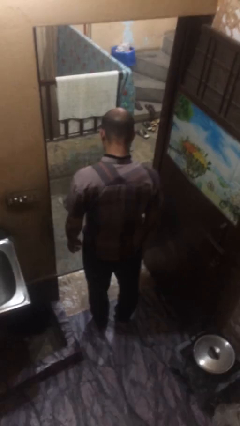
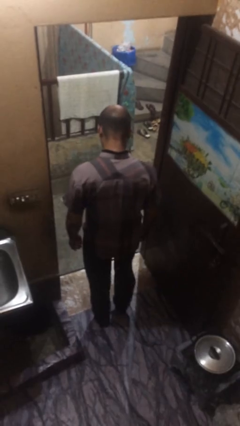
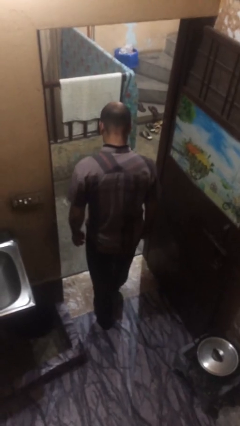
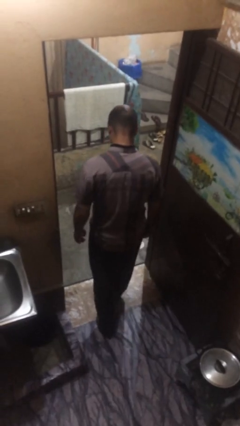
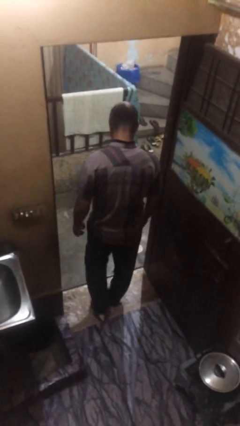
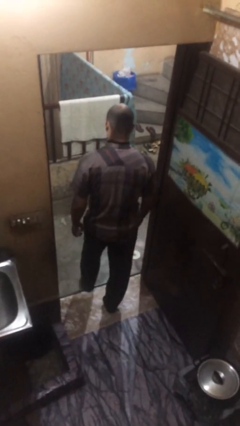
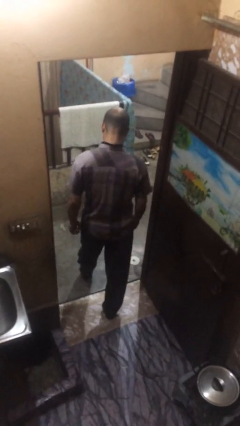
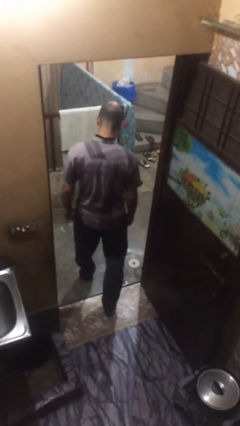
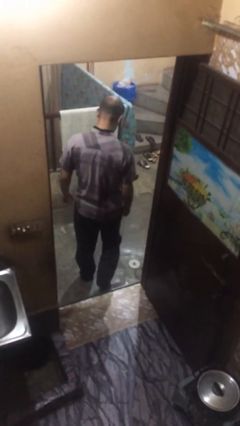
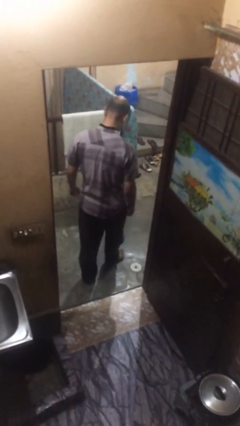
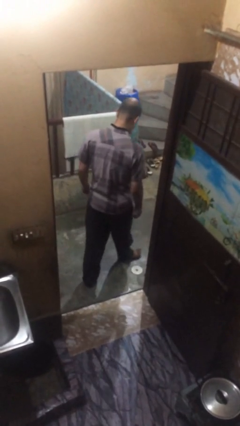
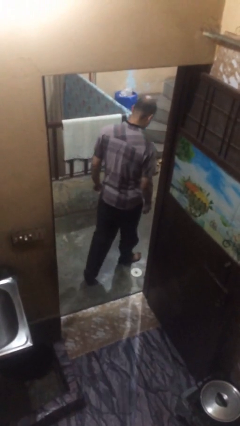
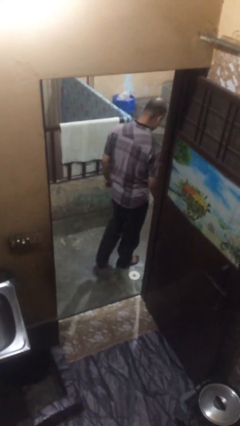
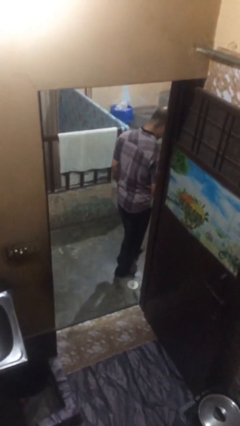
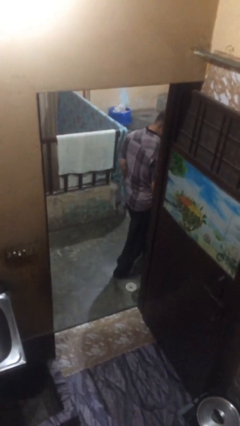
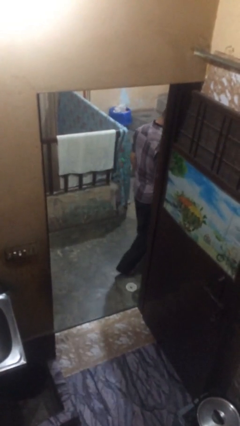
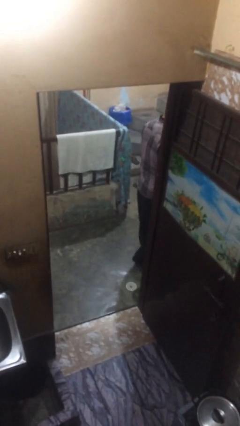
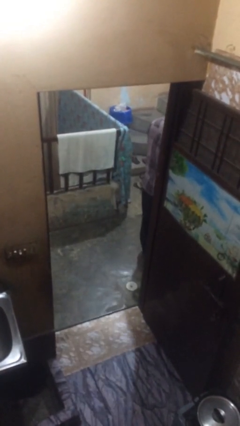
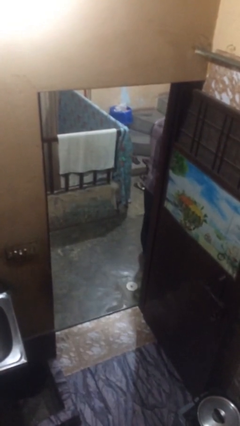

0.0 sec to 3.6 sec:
person exits scene through structure

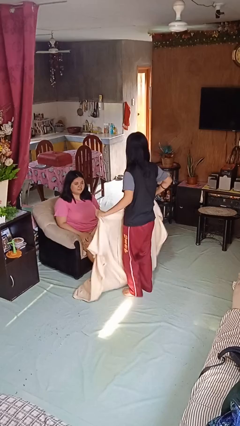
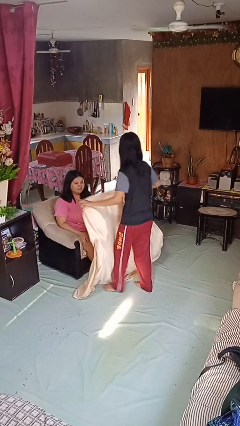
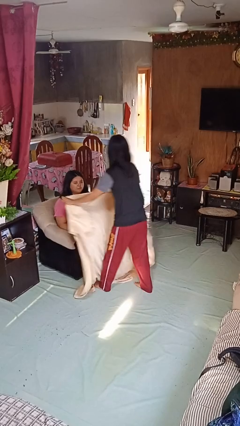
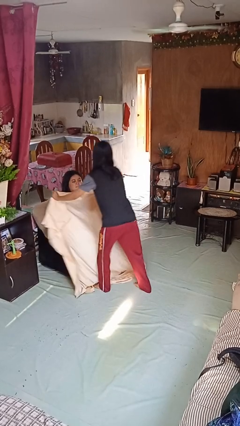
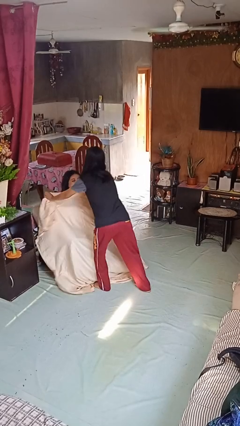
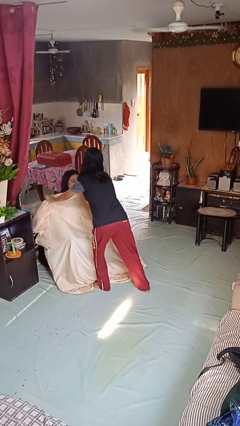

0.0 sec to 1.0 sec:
person covers friend with blanket

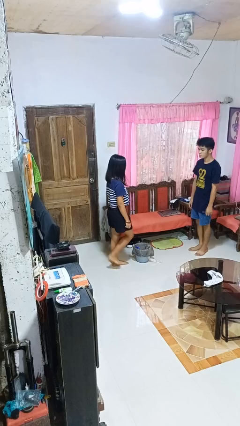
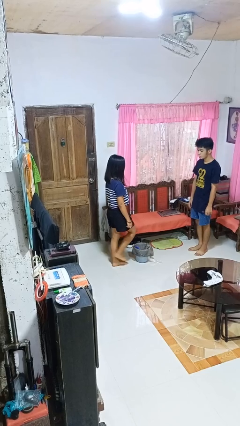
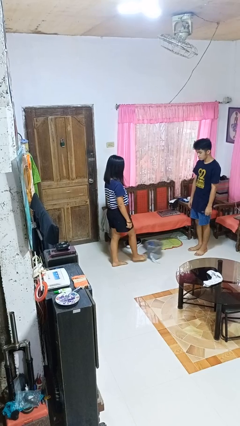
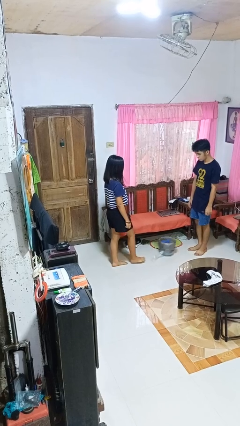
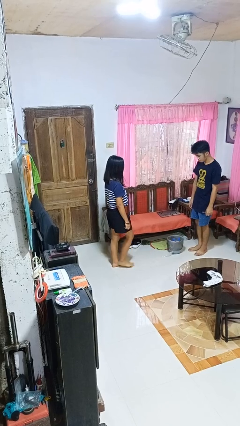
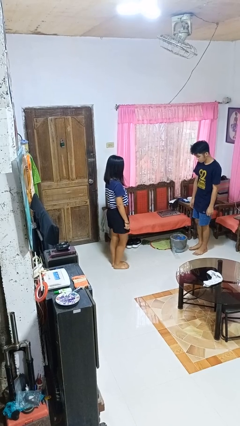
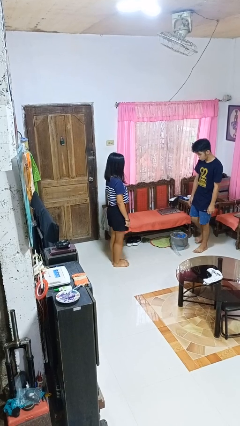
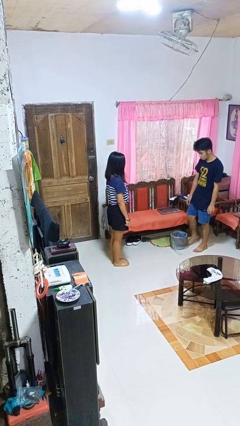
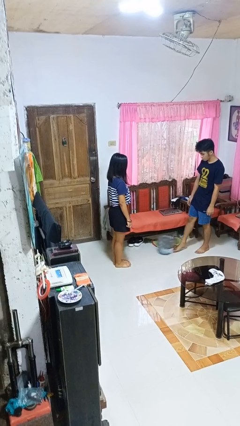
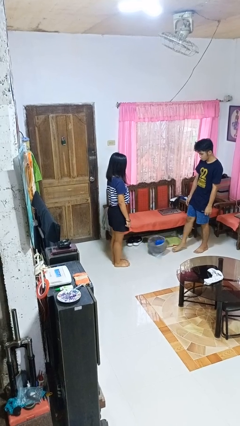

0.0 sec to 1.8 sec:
person kicks object to person

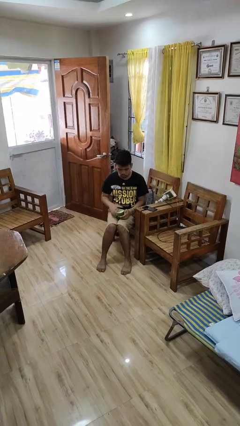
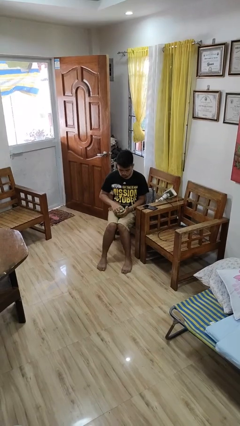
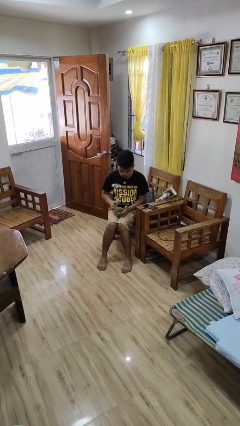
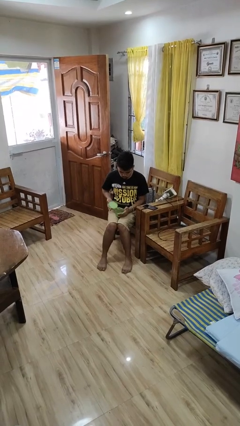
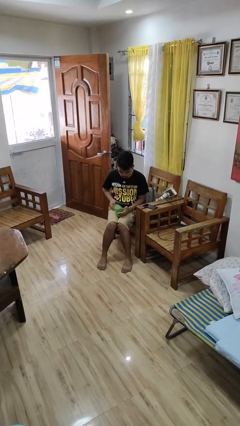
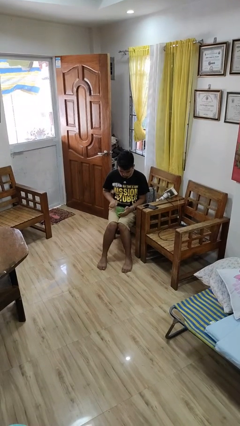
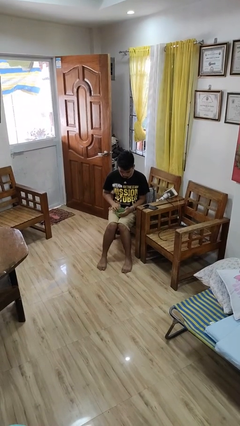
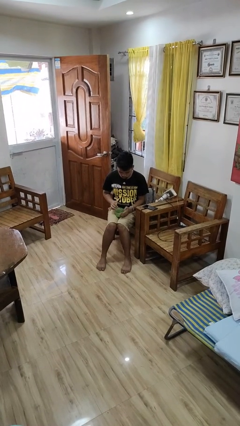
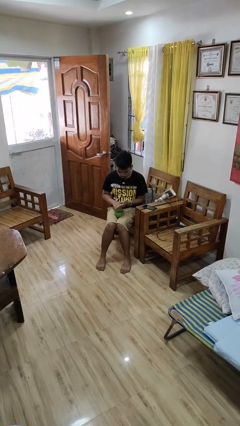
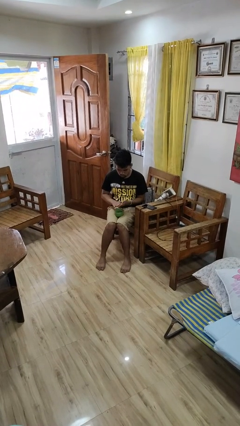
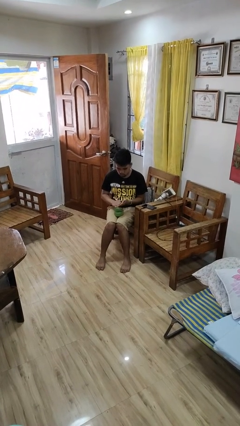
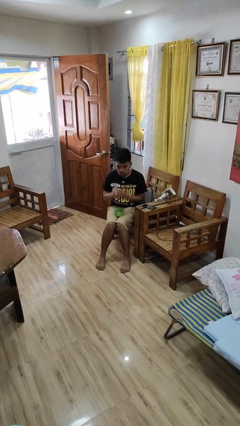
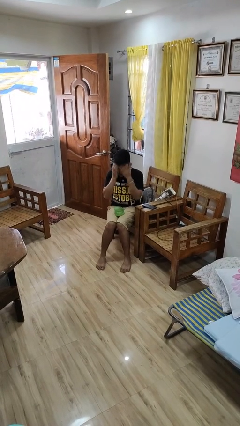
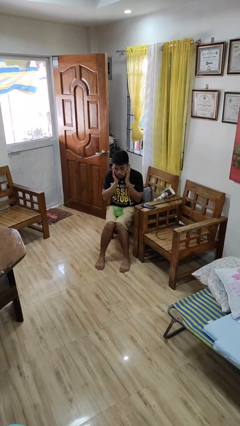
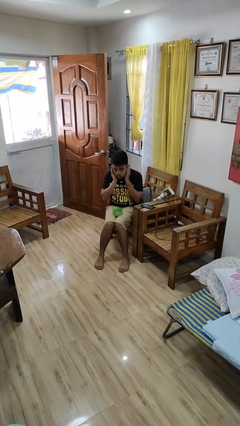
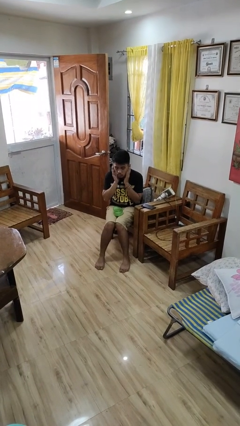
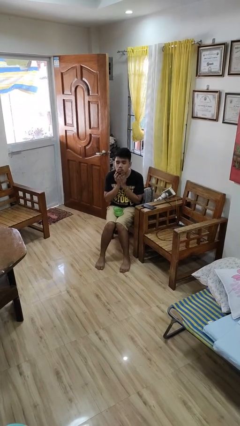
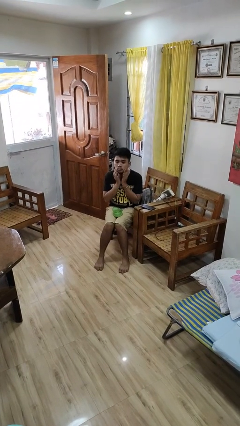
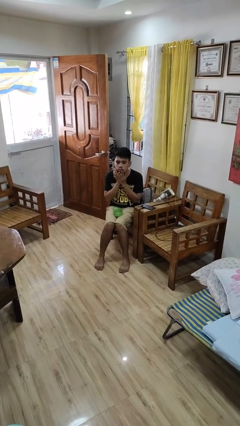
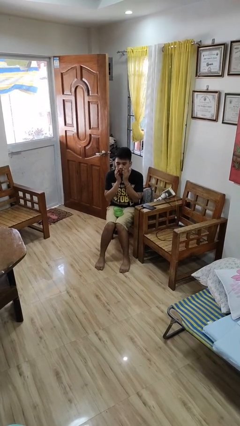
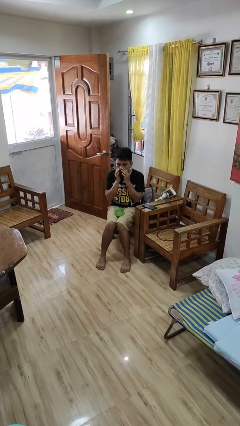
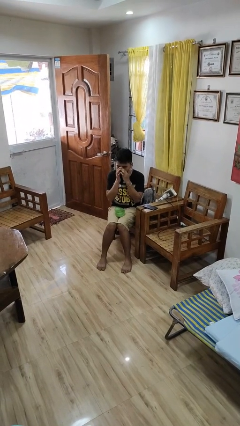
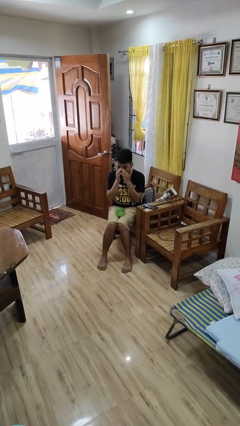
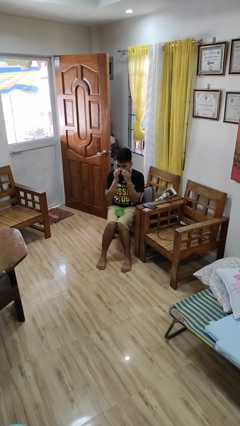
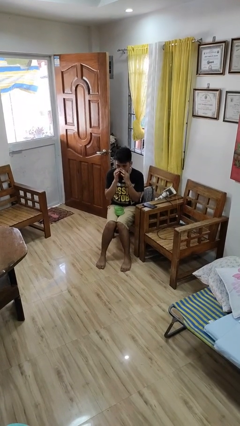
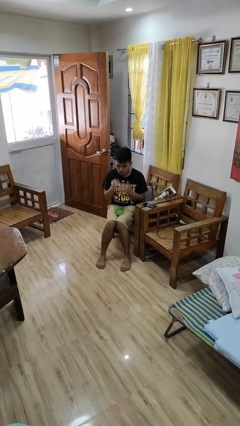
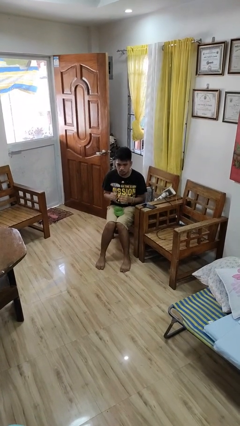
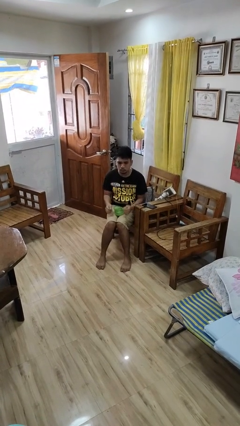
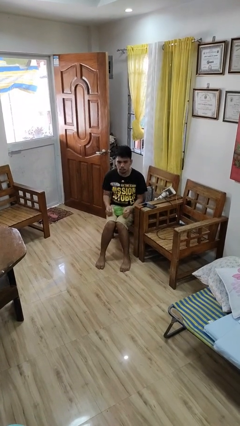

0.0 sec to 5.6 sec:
person applies facial moisturizer

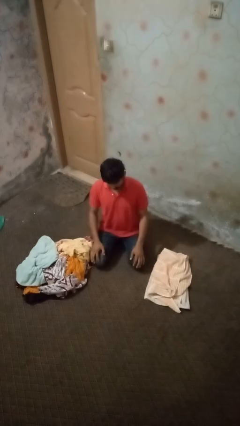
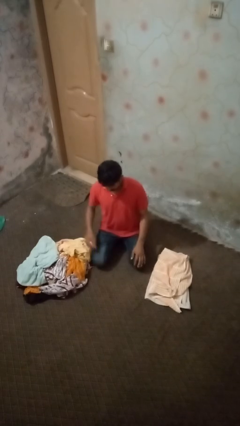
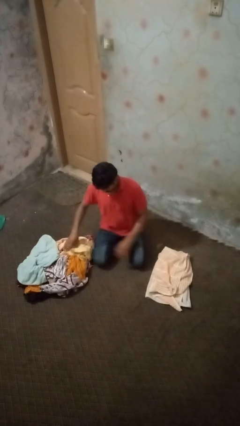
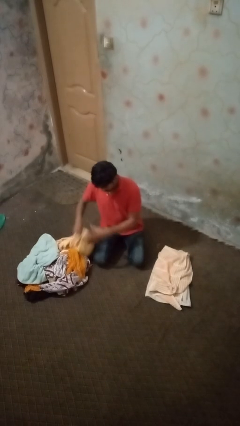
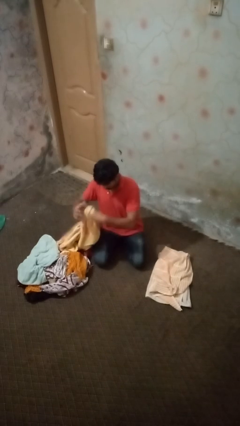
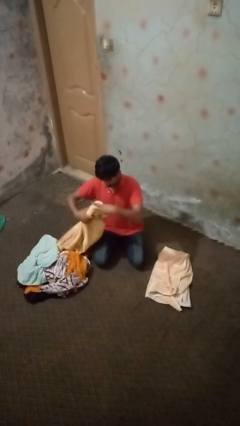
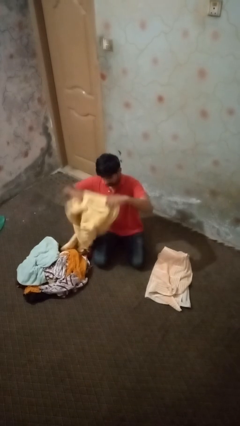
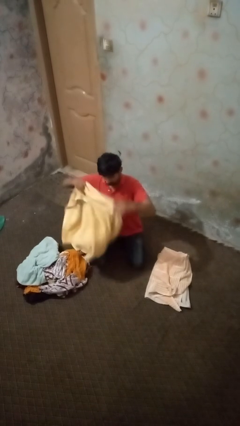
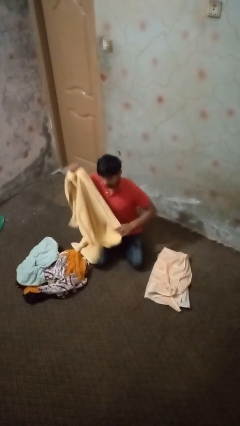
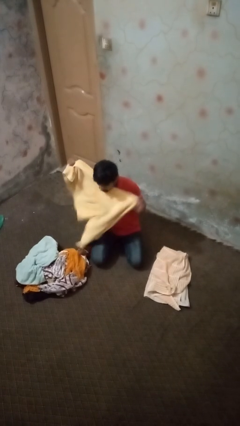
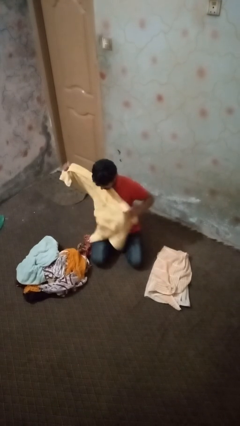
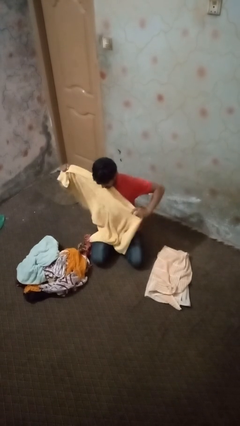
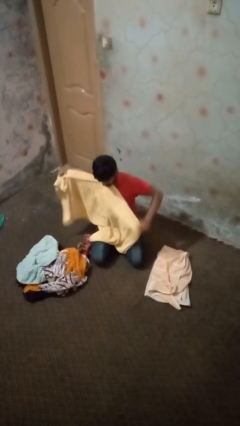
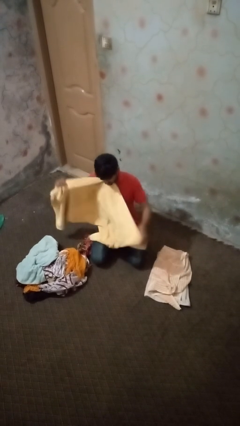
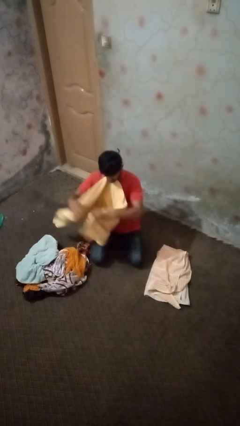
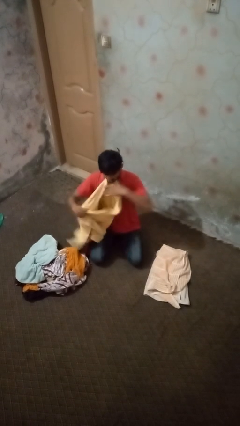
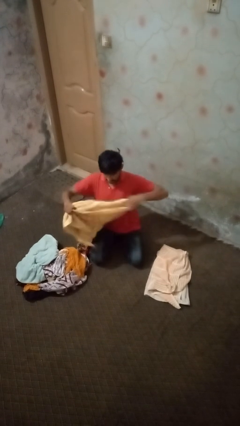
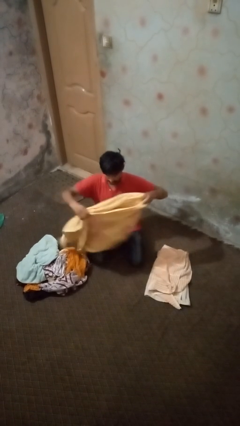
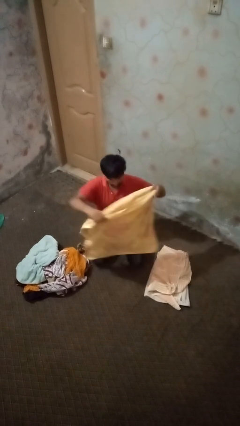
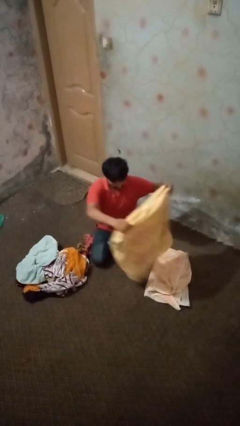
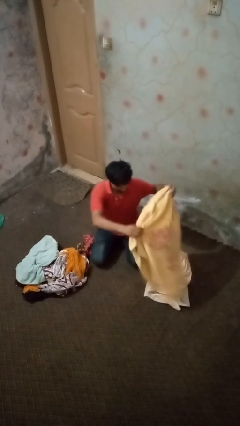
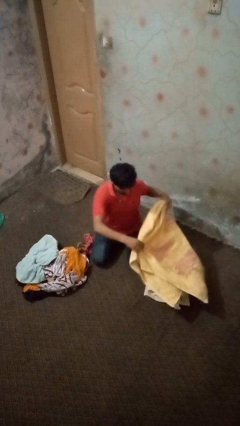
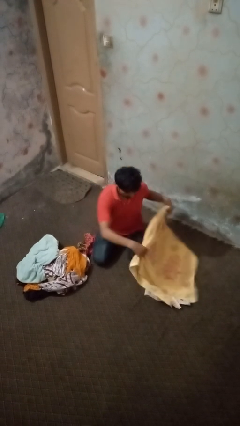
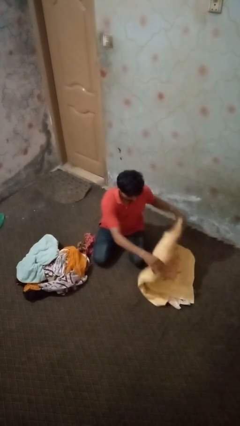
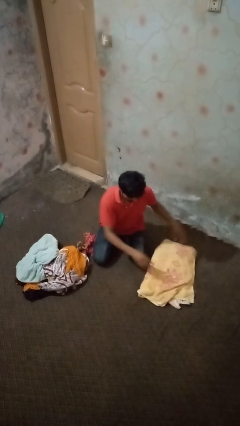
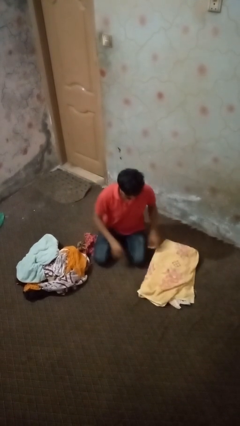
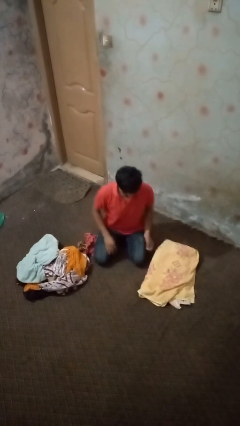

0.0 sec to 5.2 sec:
person folds towel

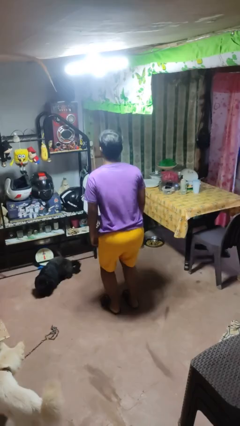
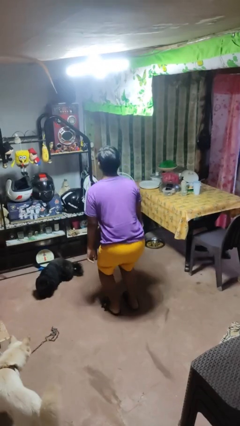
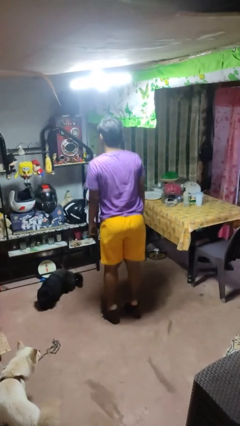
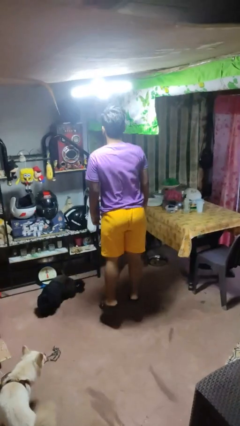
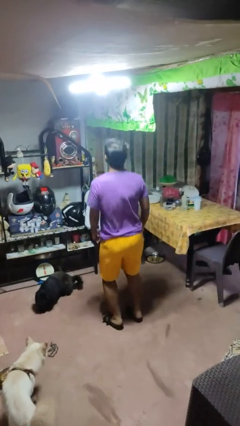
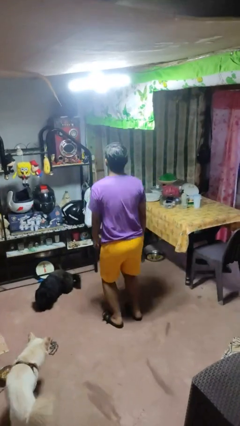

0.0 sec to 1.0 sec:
person jumps
